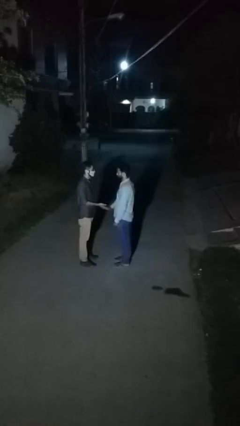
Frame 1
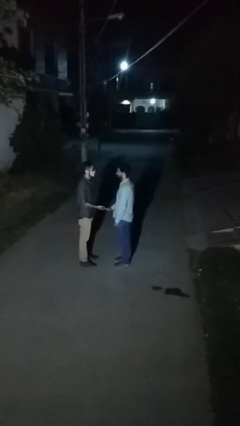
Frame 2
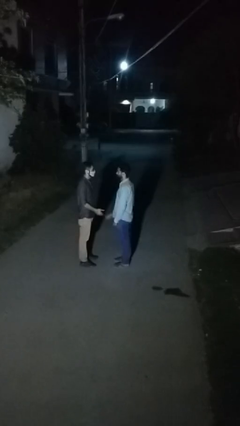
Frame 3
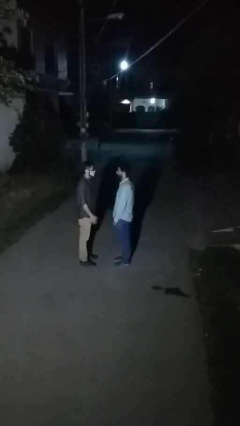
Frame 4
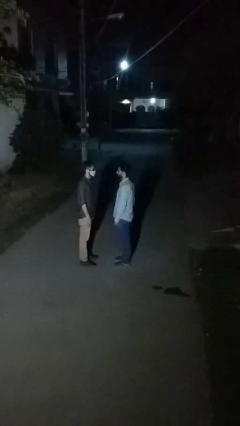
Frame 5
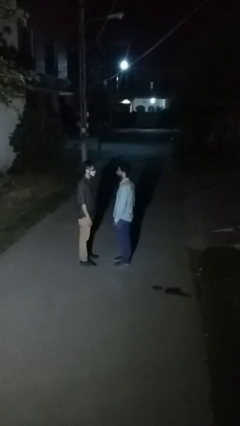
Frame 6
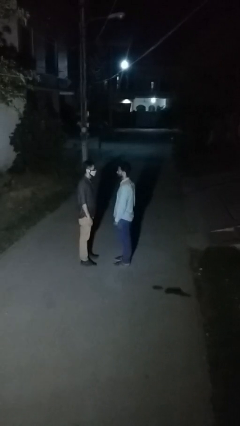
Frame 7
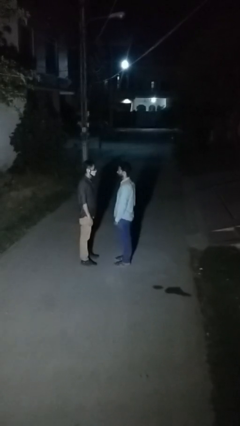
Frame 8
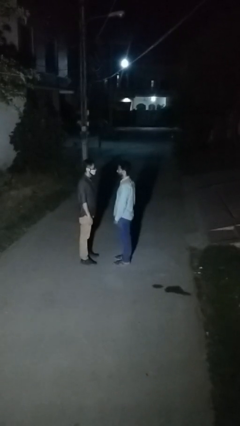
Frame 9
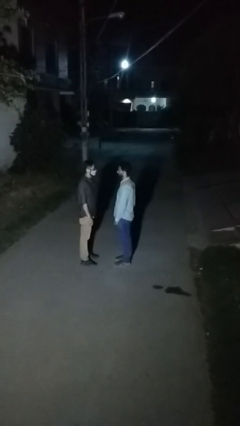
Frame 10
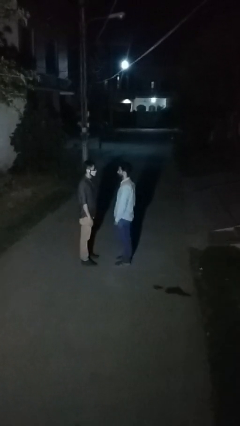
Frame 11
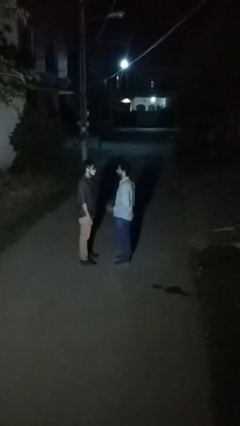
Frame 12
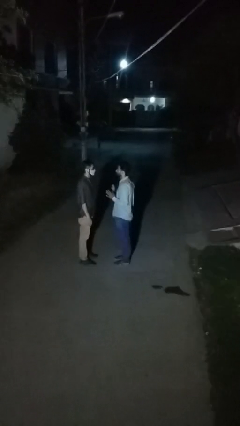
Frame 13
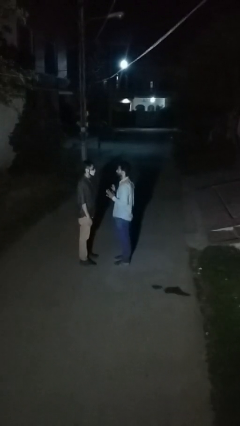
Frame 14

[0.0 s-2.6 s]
person highfives hand

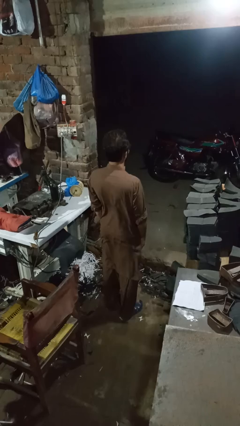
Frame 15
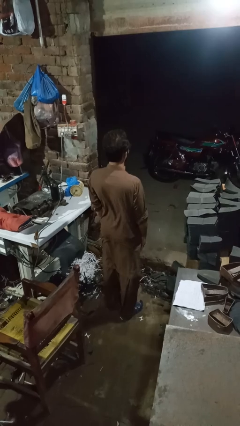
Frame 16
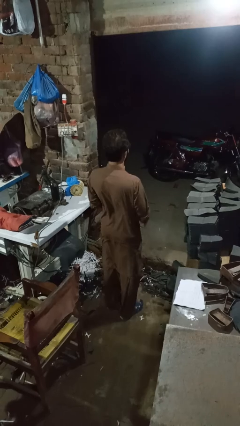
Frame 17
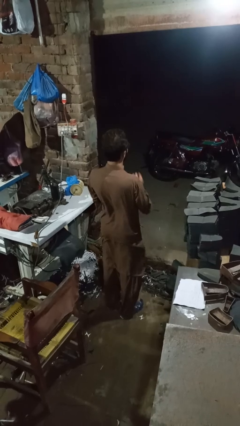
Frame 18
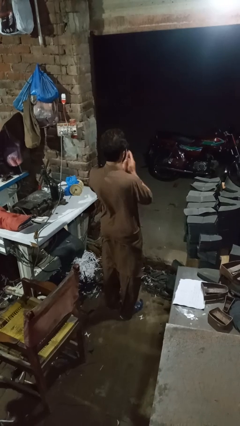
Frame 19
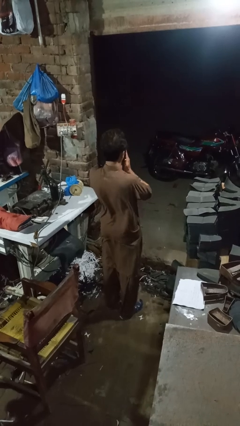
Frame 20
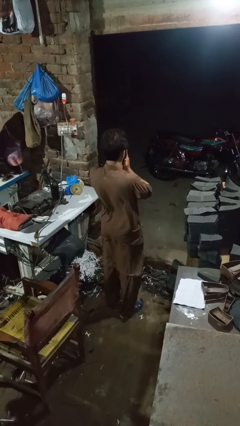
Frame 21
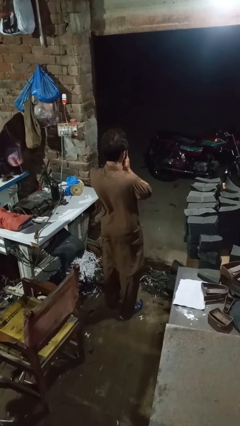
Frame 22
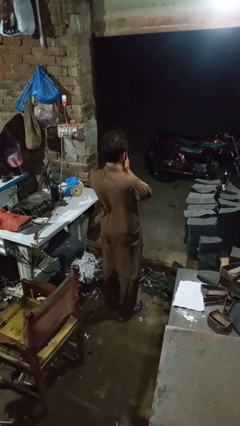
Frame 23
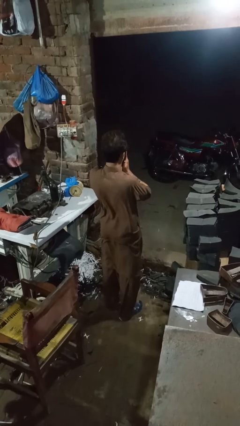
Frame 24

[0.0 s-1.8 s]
person sneezes into hand

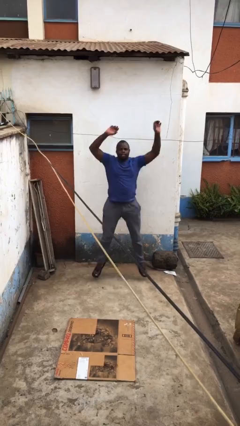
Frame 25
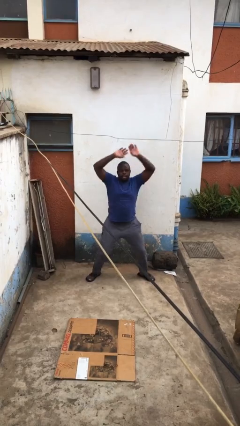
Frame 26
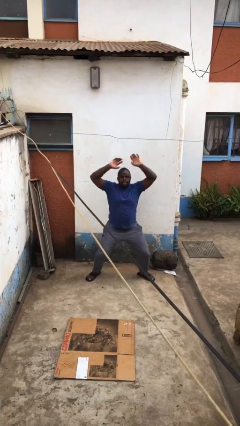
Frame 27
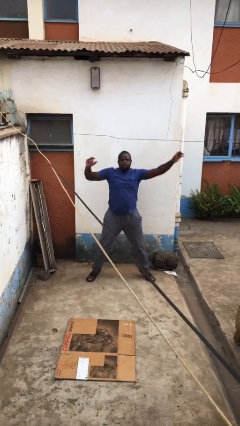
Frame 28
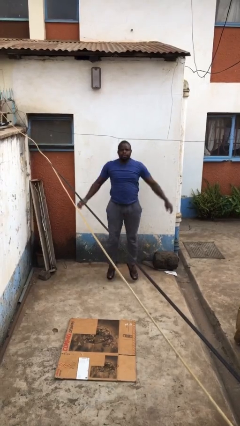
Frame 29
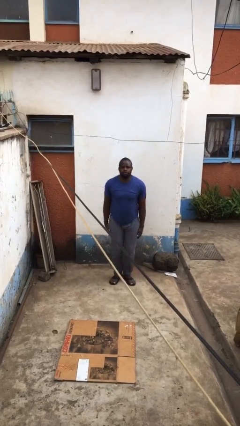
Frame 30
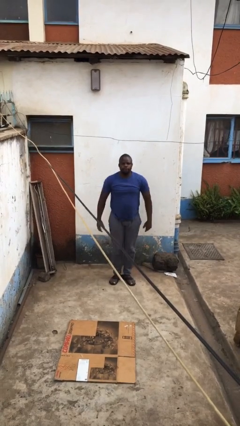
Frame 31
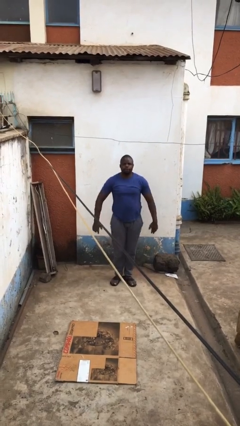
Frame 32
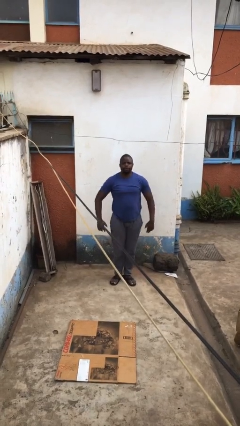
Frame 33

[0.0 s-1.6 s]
person exercises with jumping jacks

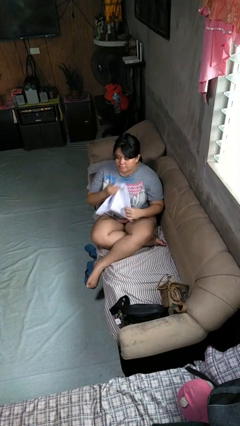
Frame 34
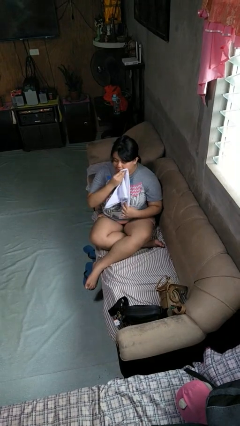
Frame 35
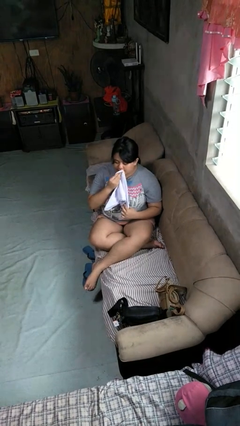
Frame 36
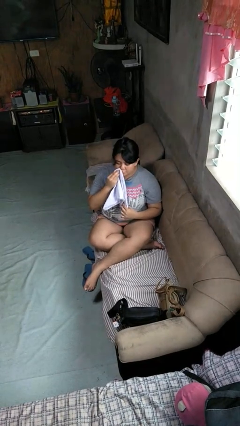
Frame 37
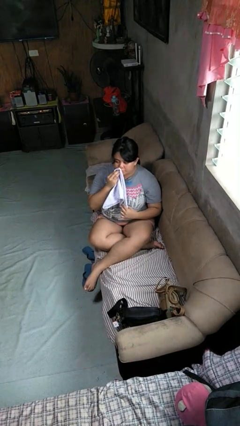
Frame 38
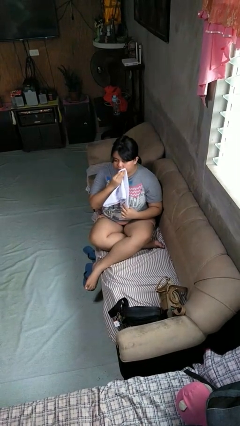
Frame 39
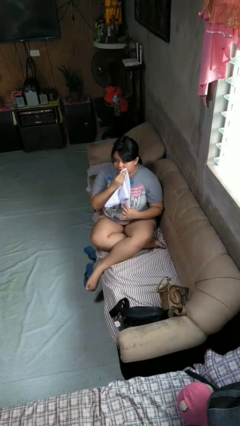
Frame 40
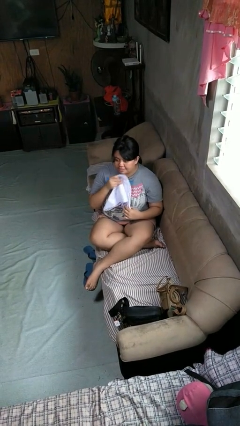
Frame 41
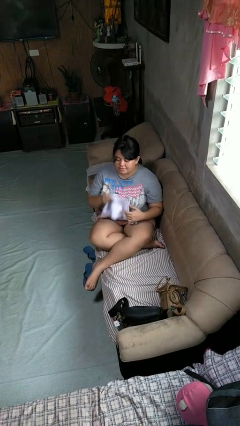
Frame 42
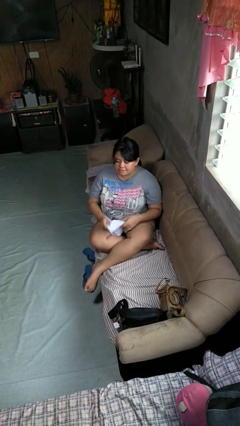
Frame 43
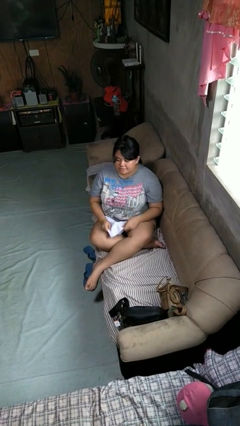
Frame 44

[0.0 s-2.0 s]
person wipes mouth with napkin

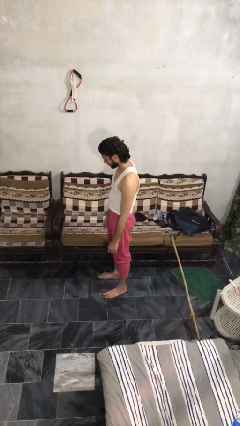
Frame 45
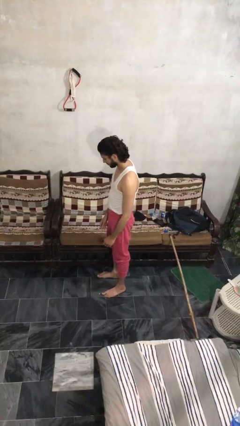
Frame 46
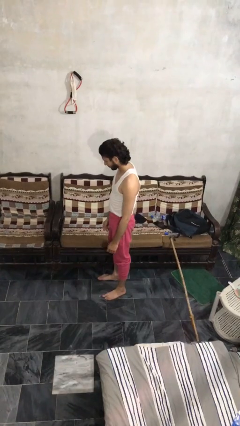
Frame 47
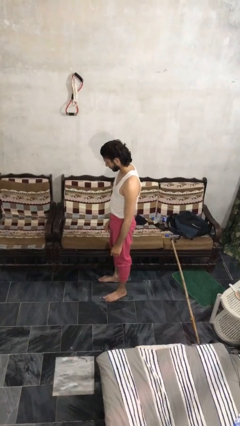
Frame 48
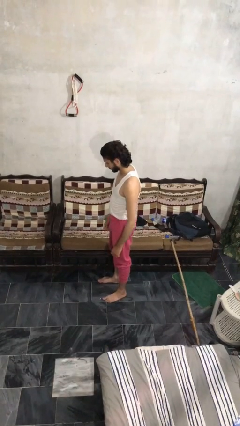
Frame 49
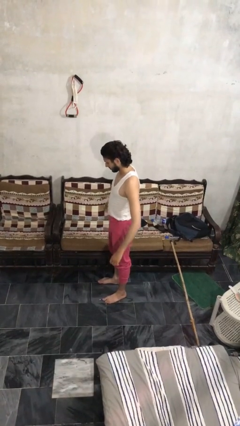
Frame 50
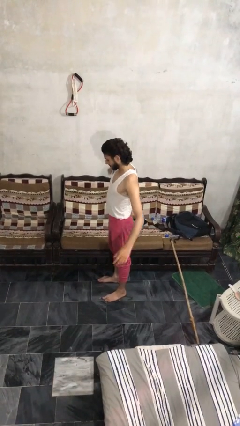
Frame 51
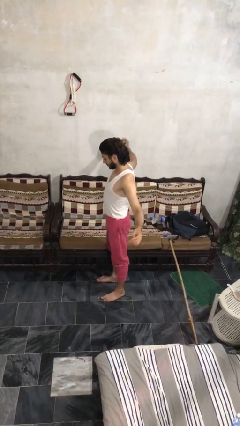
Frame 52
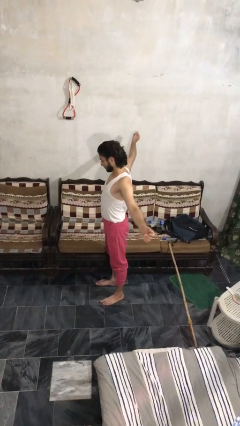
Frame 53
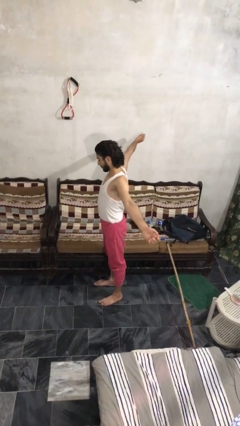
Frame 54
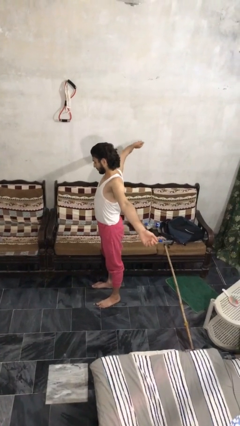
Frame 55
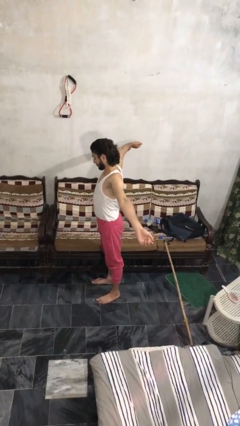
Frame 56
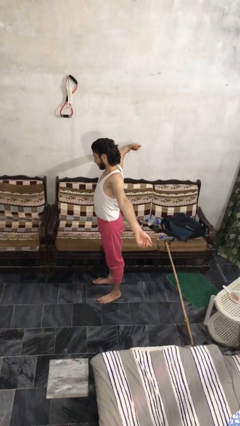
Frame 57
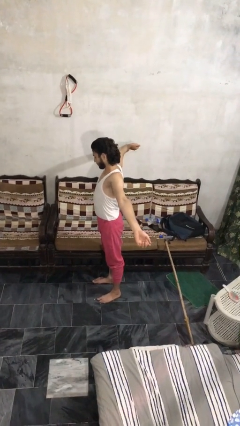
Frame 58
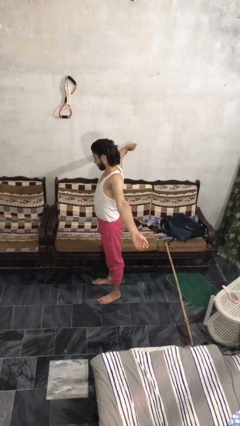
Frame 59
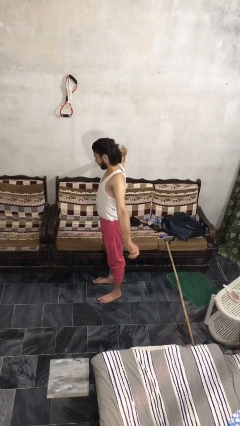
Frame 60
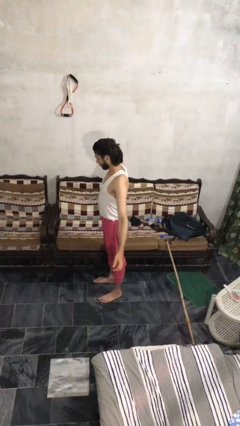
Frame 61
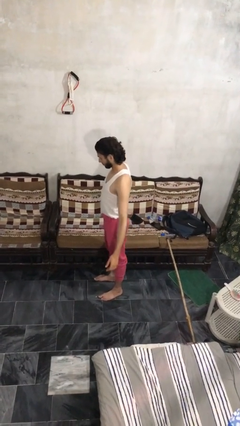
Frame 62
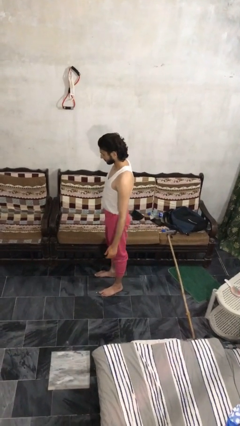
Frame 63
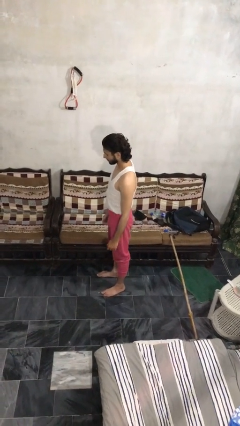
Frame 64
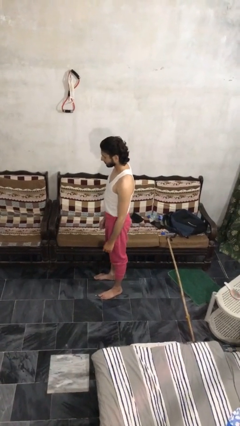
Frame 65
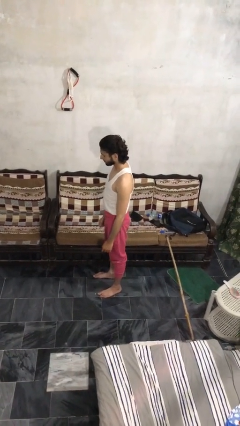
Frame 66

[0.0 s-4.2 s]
person stretches arms to side

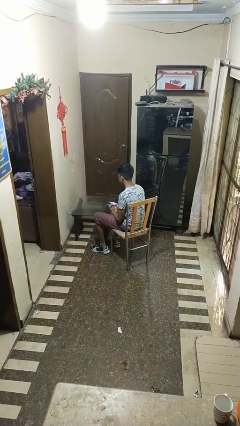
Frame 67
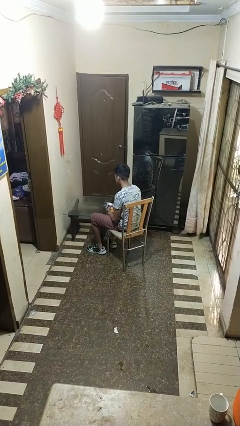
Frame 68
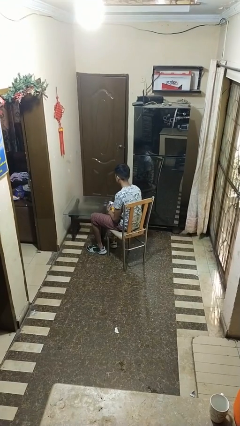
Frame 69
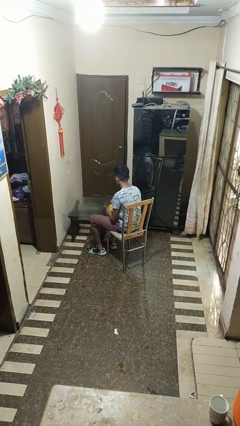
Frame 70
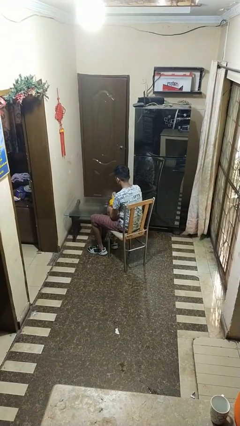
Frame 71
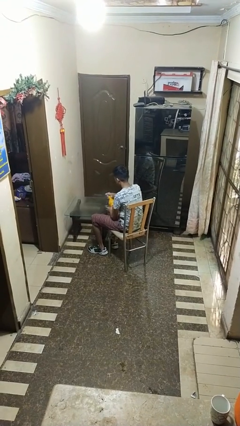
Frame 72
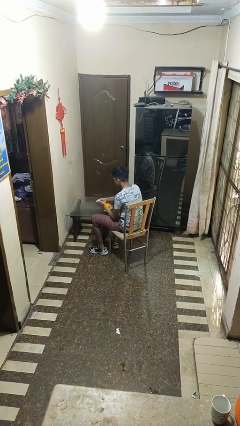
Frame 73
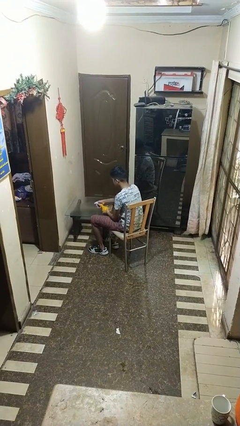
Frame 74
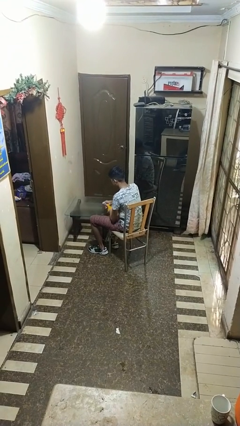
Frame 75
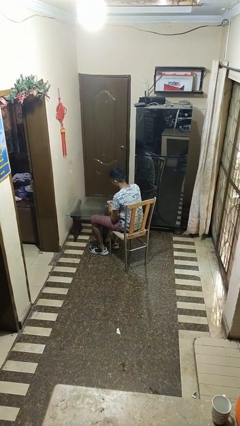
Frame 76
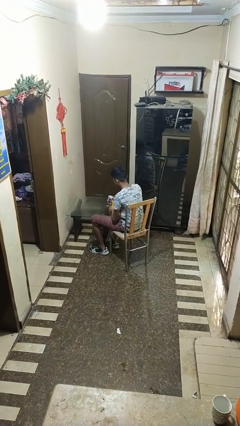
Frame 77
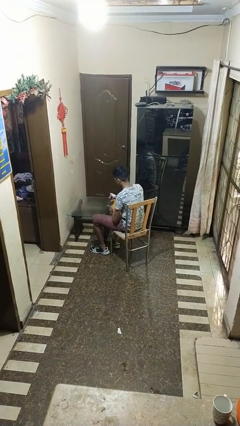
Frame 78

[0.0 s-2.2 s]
person sprays from bottle

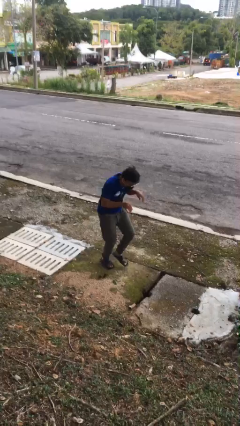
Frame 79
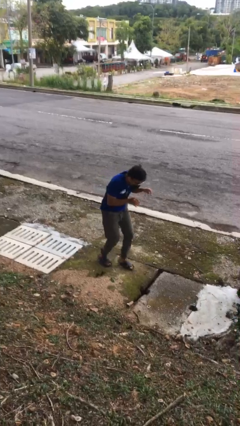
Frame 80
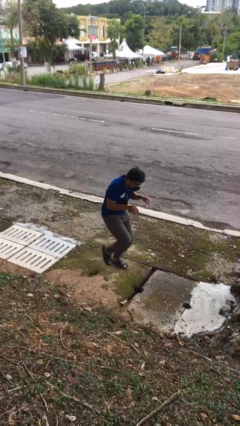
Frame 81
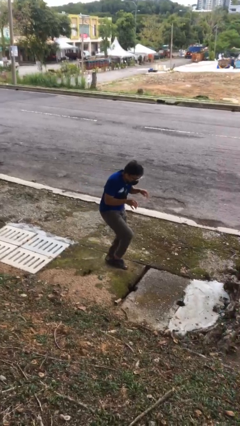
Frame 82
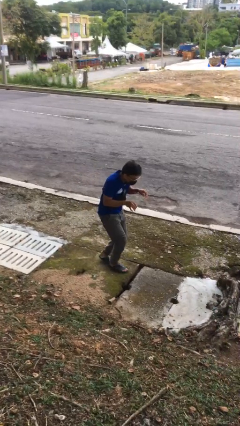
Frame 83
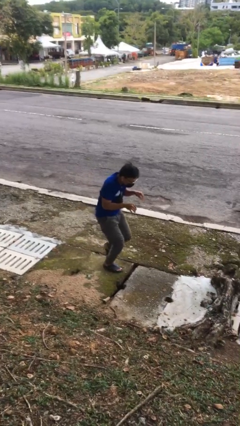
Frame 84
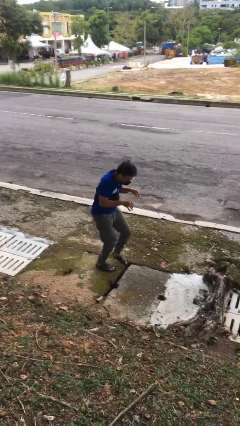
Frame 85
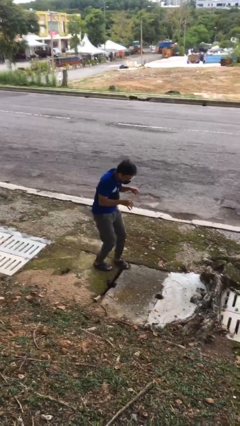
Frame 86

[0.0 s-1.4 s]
person walks tiptoe

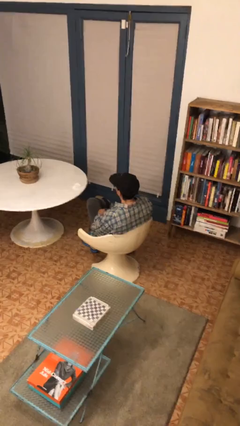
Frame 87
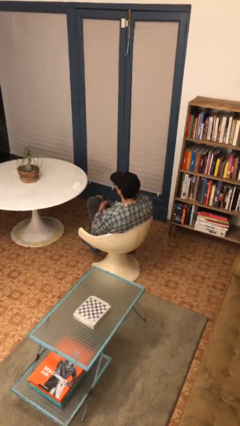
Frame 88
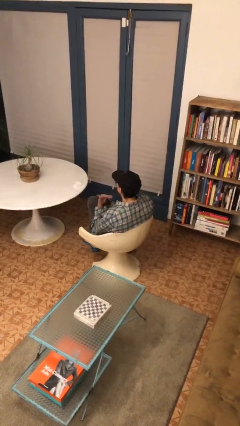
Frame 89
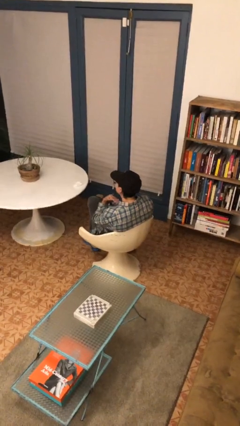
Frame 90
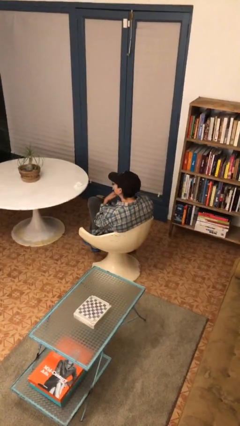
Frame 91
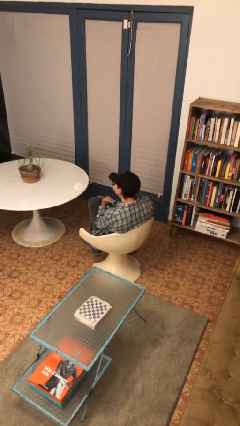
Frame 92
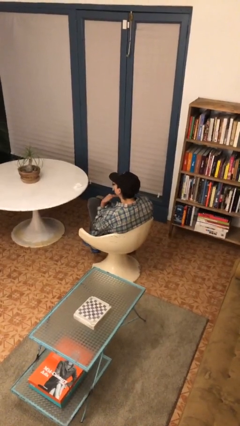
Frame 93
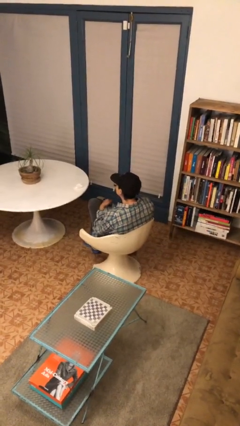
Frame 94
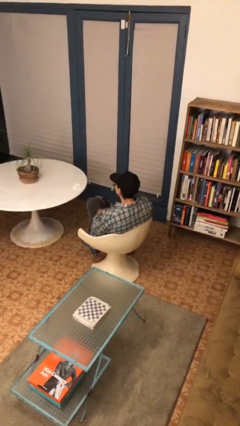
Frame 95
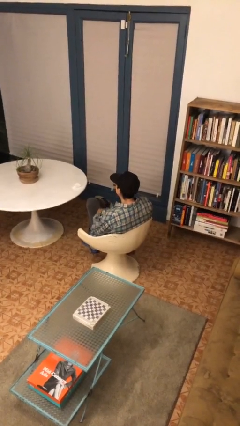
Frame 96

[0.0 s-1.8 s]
person gestures cut
